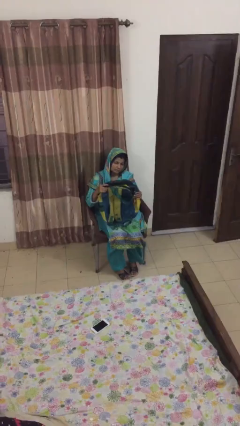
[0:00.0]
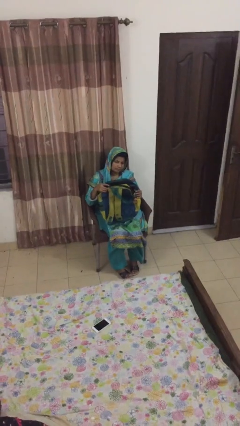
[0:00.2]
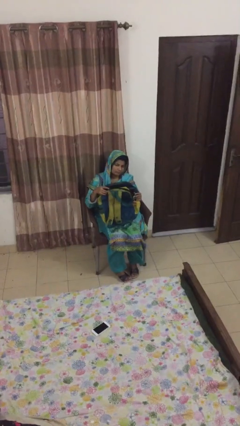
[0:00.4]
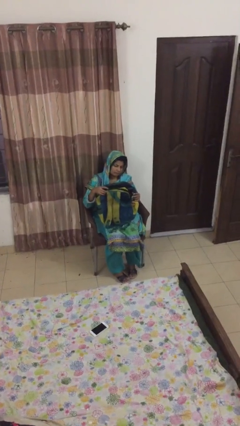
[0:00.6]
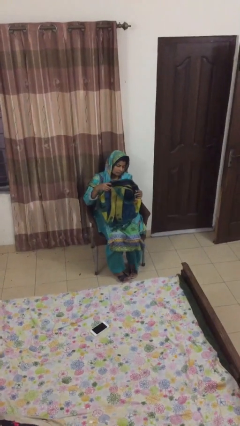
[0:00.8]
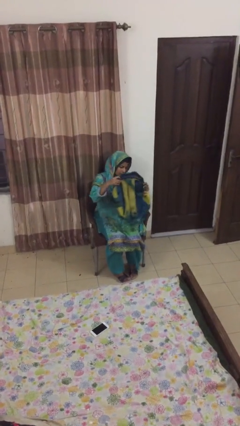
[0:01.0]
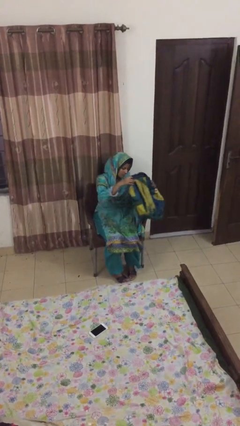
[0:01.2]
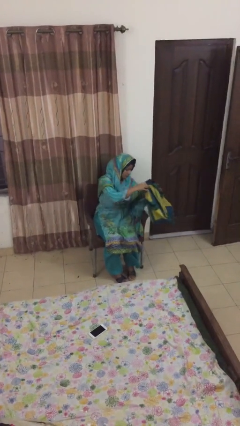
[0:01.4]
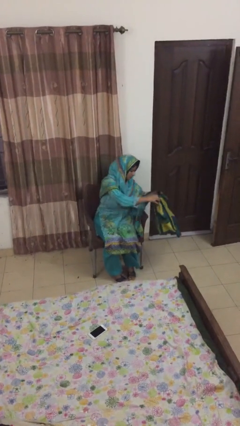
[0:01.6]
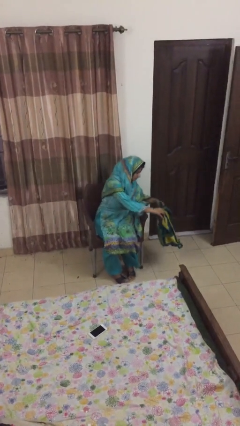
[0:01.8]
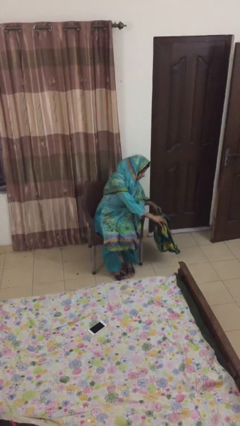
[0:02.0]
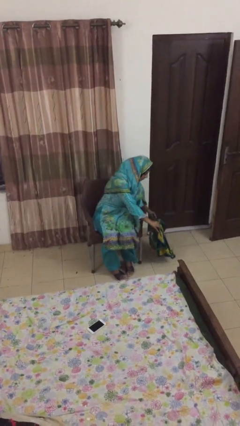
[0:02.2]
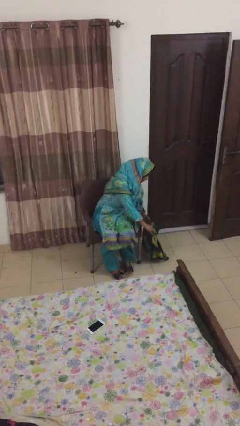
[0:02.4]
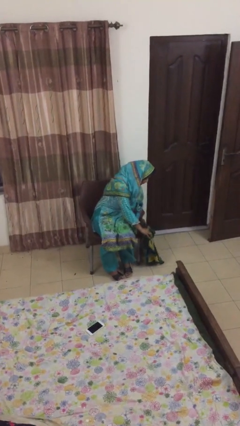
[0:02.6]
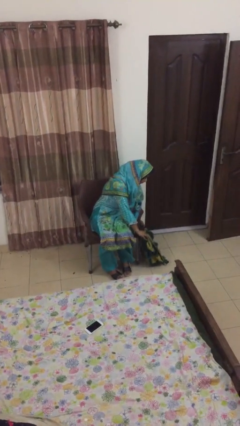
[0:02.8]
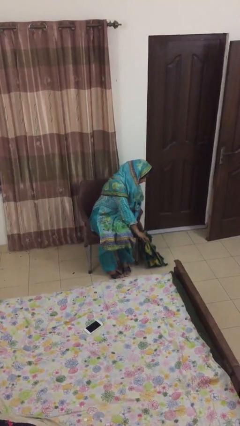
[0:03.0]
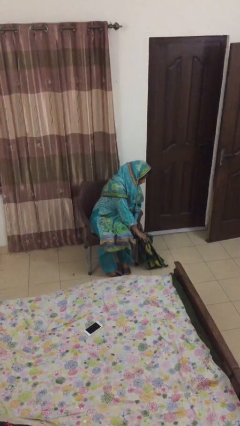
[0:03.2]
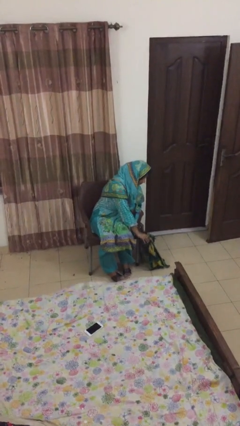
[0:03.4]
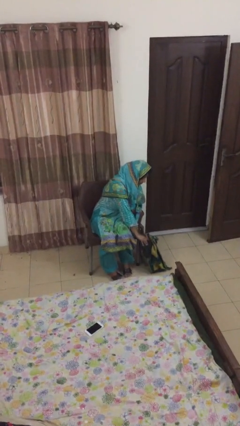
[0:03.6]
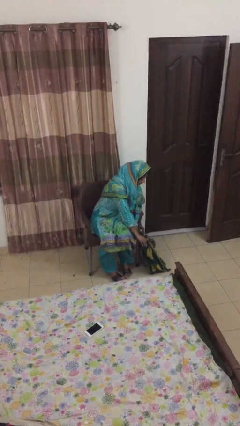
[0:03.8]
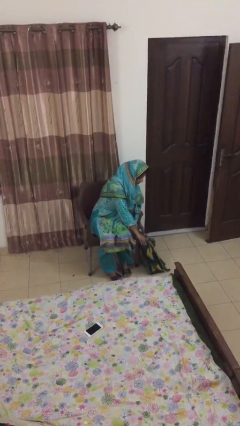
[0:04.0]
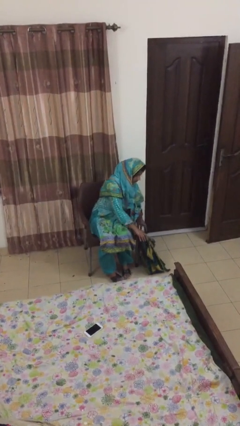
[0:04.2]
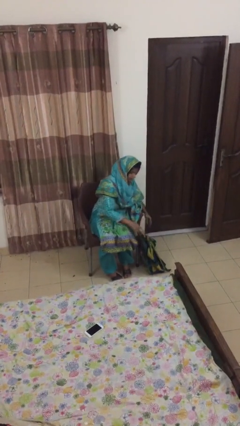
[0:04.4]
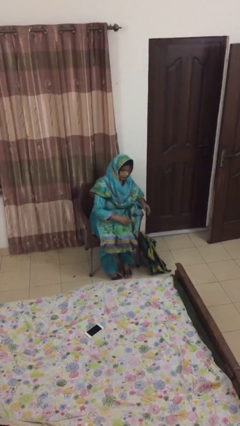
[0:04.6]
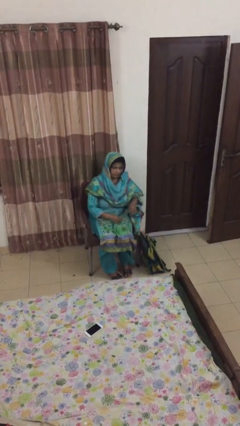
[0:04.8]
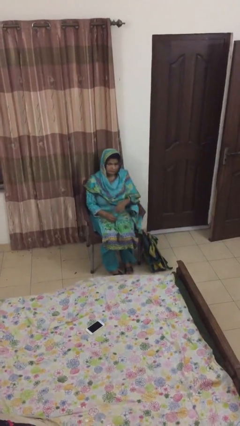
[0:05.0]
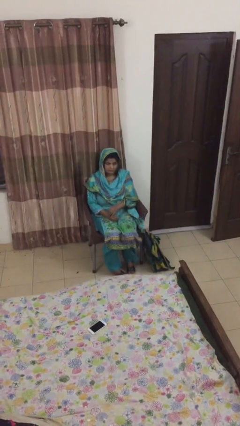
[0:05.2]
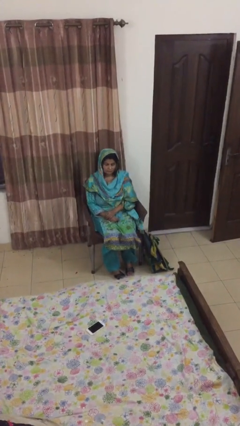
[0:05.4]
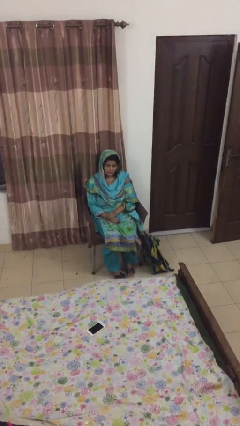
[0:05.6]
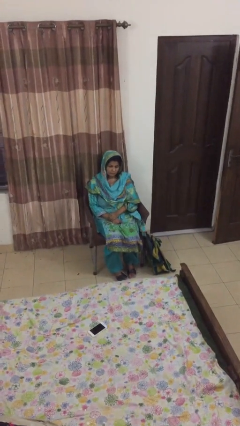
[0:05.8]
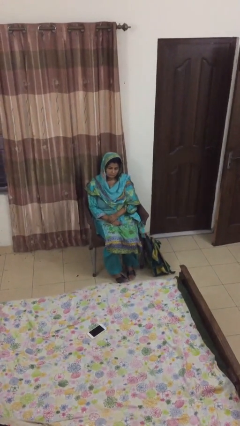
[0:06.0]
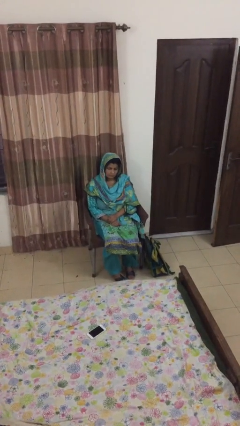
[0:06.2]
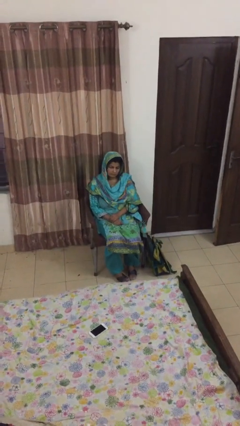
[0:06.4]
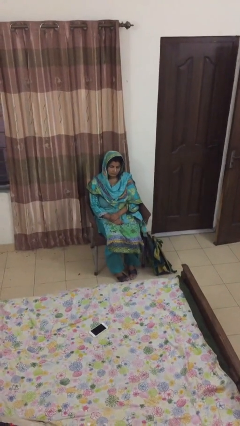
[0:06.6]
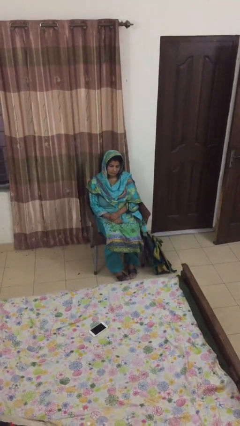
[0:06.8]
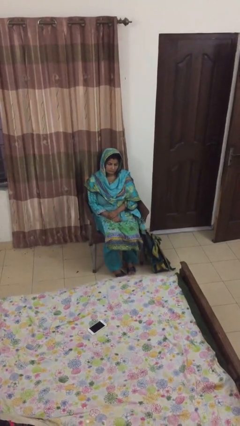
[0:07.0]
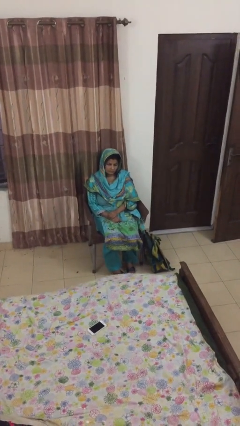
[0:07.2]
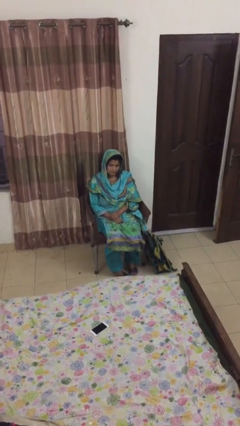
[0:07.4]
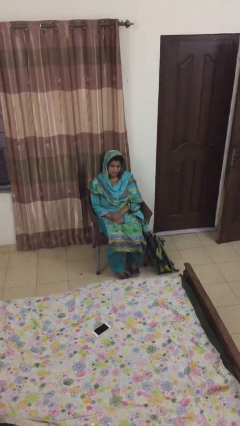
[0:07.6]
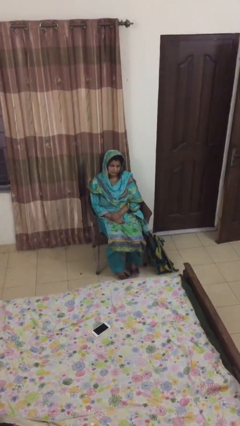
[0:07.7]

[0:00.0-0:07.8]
person puts down object on floor

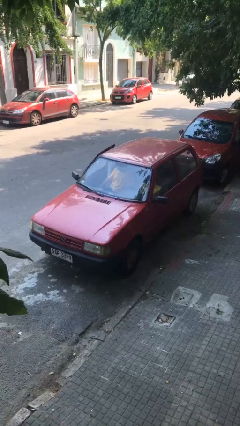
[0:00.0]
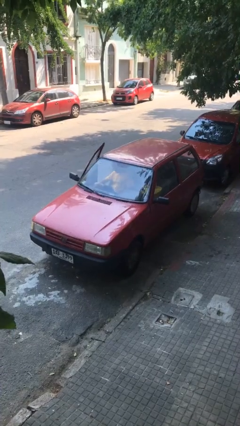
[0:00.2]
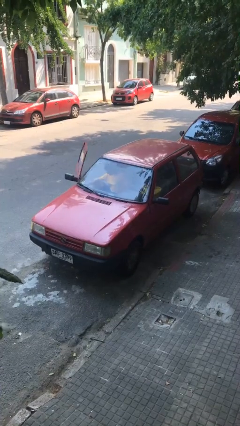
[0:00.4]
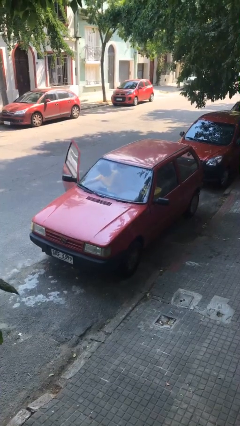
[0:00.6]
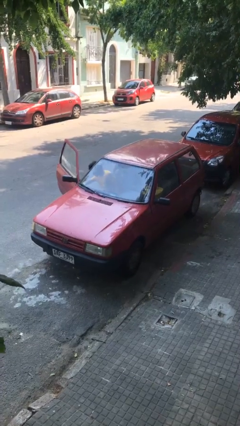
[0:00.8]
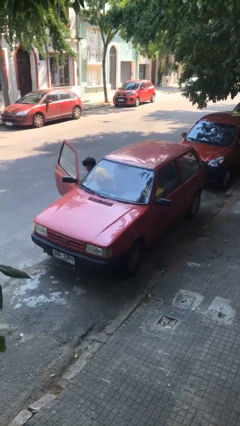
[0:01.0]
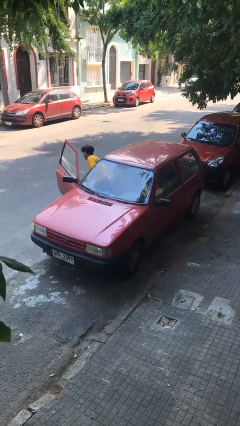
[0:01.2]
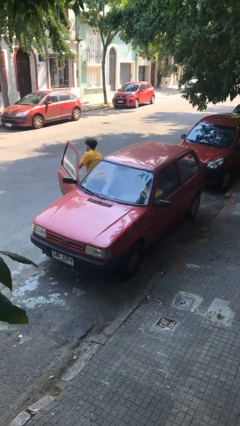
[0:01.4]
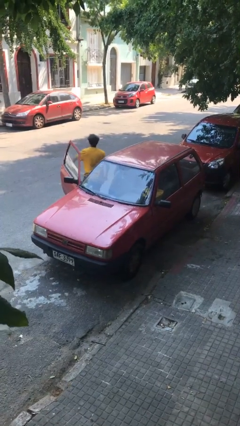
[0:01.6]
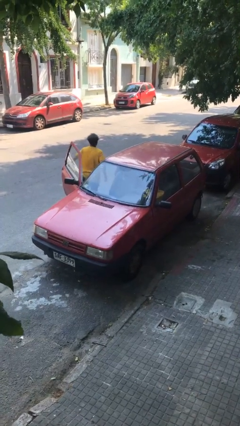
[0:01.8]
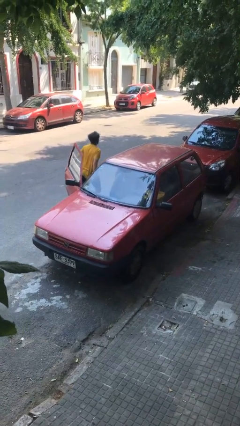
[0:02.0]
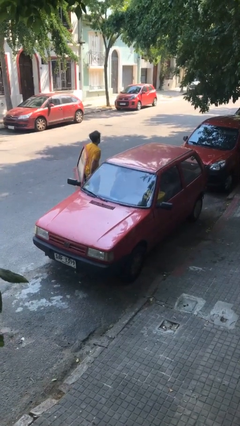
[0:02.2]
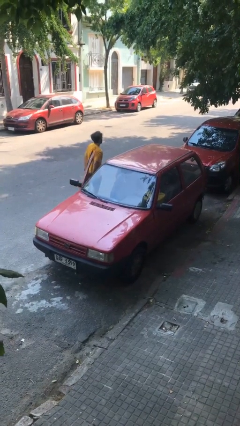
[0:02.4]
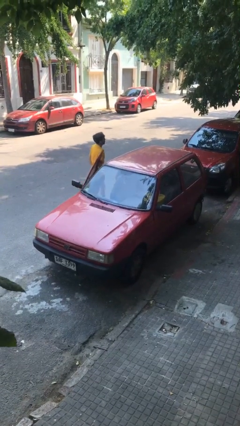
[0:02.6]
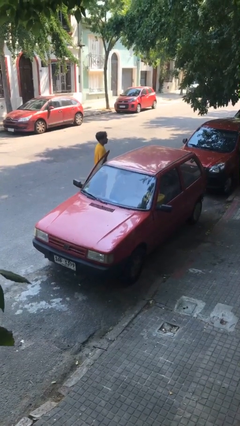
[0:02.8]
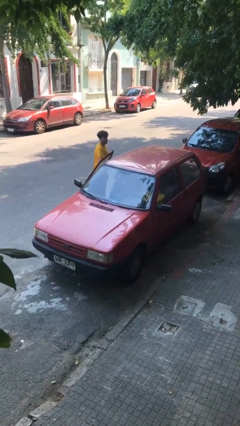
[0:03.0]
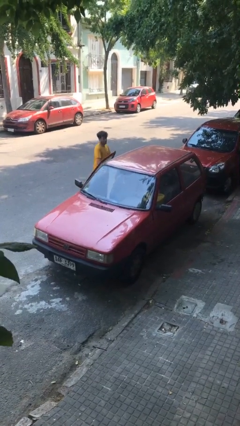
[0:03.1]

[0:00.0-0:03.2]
car drops off person

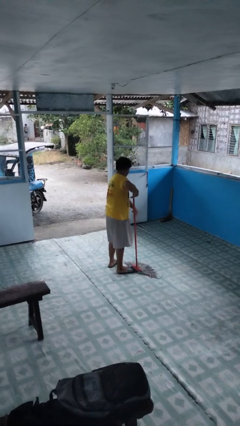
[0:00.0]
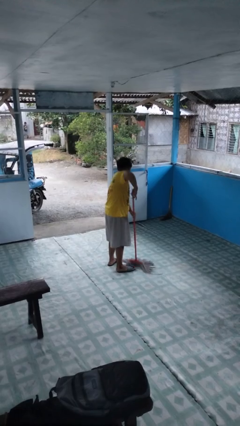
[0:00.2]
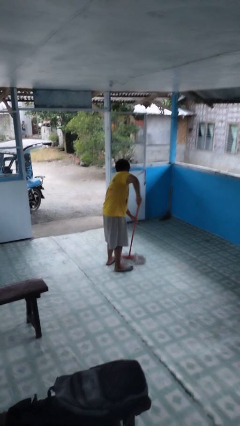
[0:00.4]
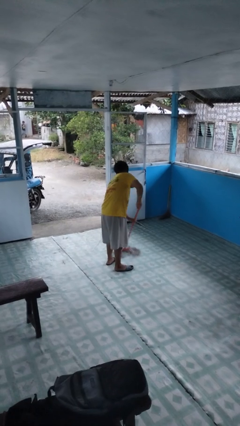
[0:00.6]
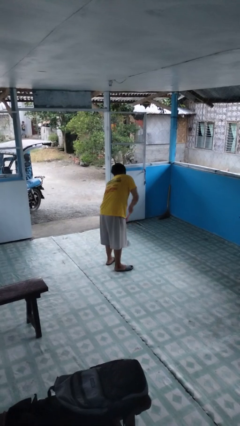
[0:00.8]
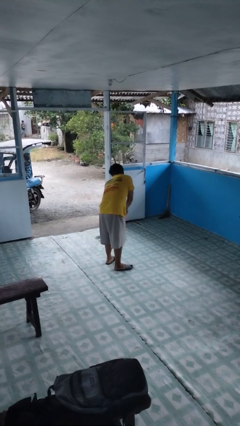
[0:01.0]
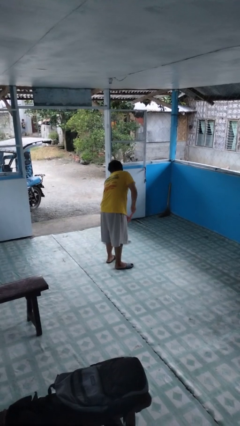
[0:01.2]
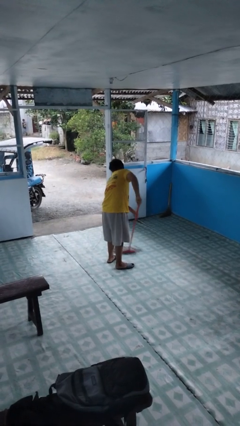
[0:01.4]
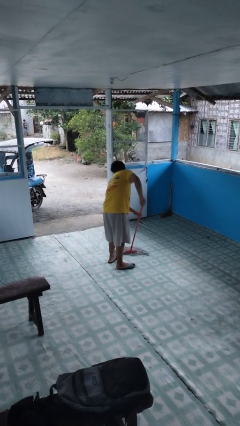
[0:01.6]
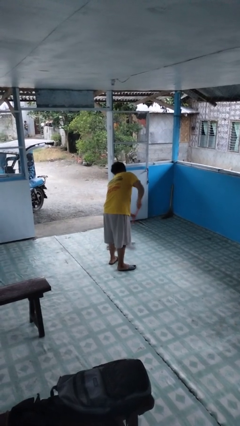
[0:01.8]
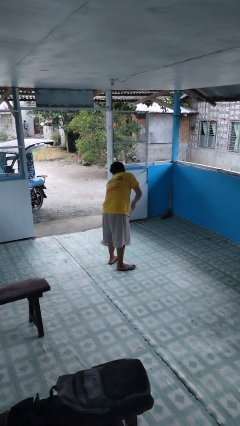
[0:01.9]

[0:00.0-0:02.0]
person mops

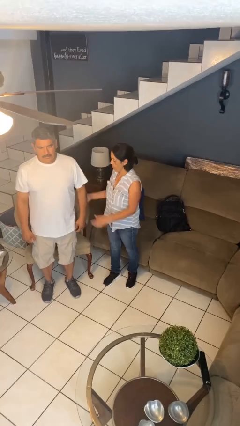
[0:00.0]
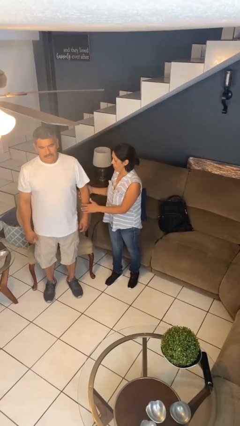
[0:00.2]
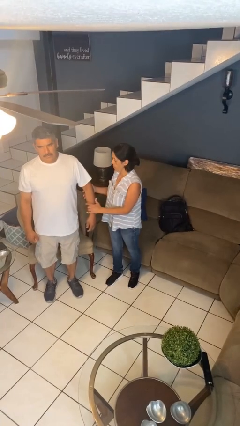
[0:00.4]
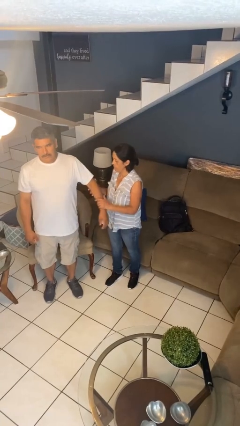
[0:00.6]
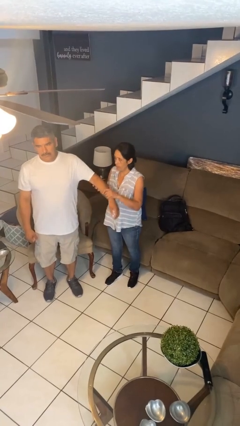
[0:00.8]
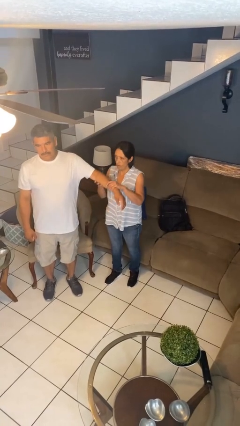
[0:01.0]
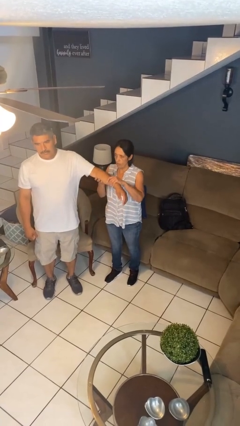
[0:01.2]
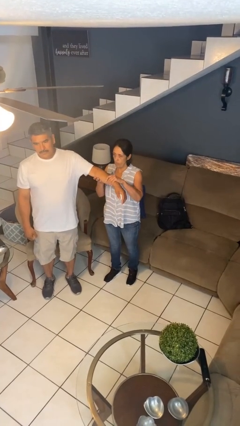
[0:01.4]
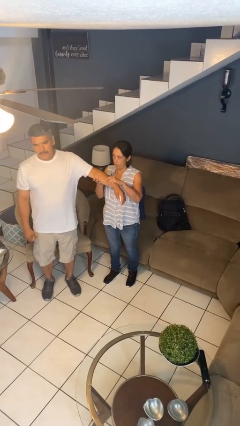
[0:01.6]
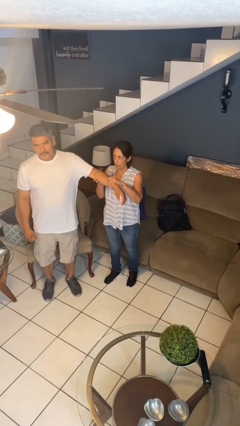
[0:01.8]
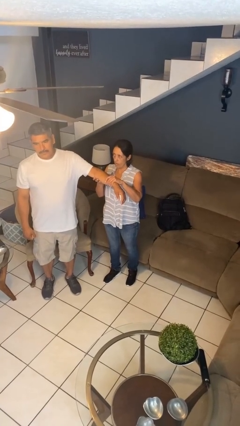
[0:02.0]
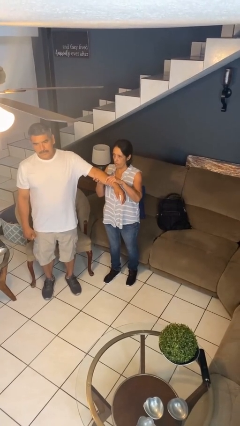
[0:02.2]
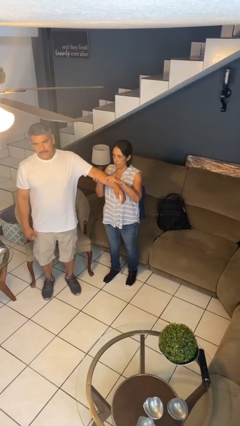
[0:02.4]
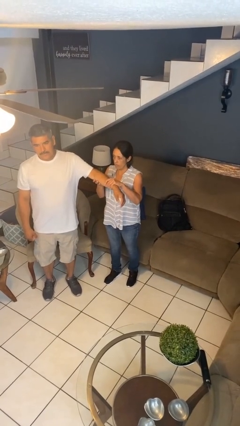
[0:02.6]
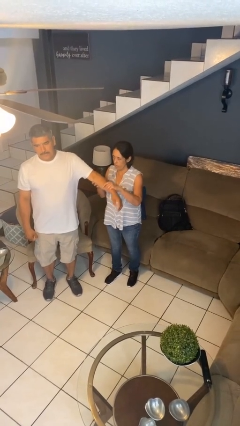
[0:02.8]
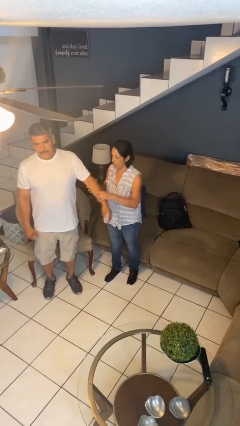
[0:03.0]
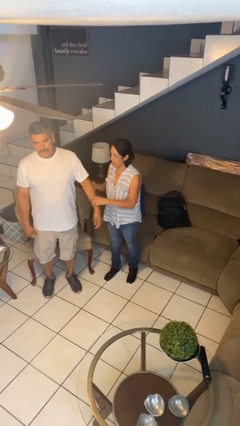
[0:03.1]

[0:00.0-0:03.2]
person grabs person by forearm

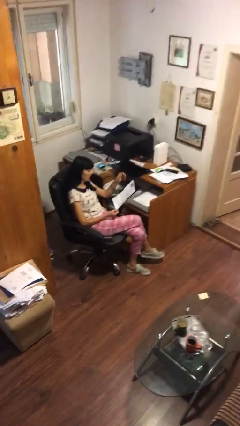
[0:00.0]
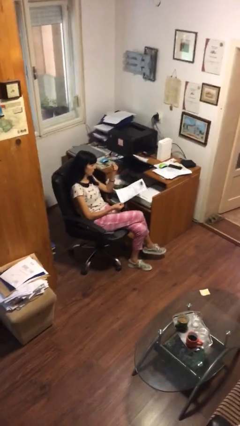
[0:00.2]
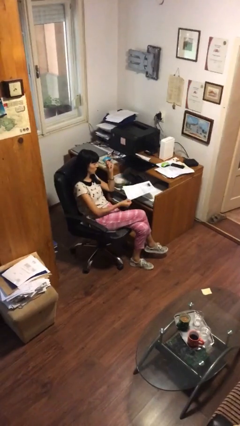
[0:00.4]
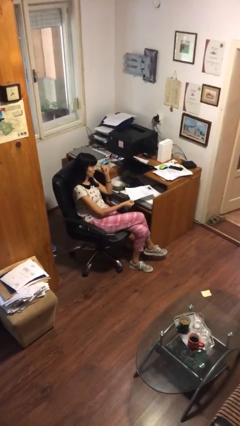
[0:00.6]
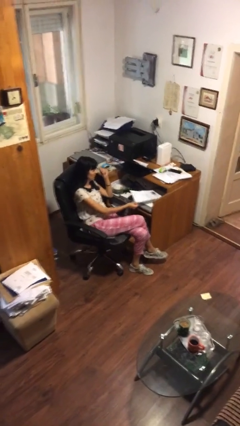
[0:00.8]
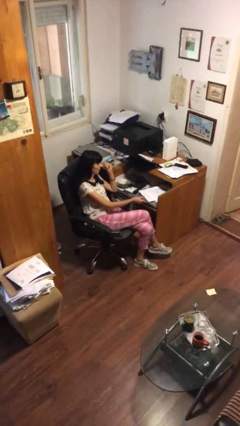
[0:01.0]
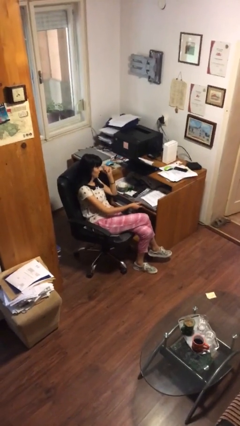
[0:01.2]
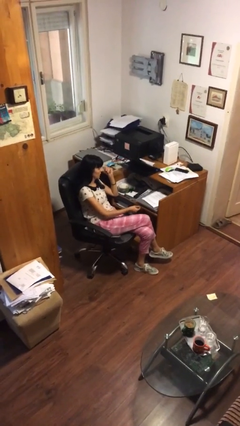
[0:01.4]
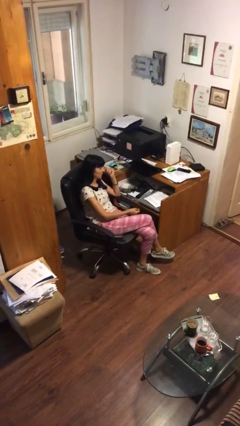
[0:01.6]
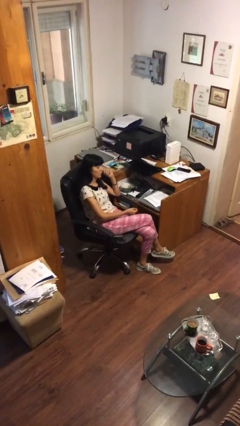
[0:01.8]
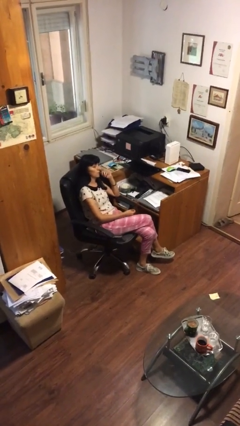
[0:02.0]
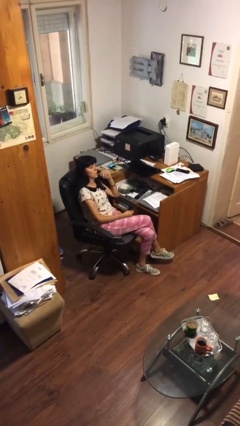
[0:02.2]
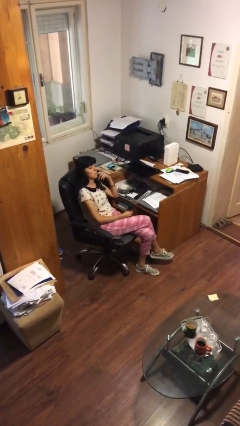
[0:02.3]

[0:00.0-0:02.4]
person puts down object on table
